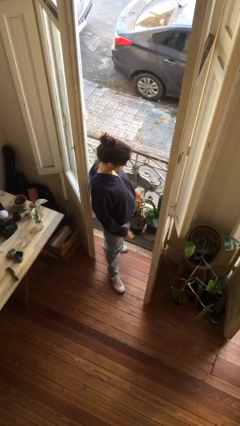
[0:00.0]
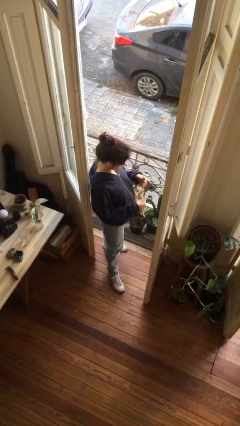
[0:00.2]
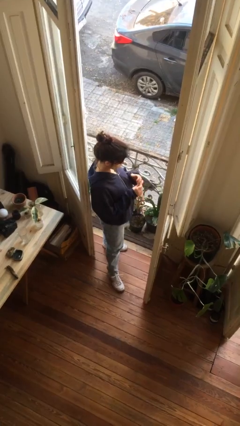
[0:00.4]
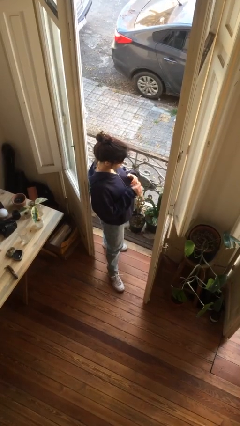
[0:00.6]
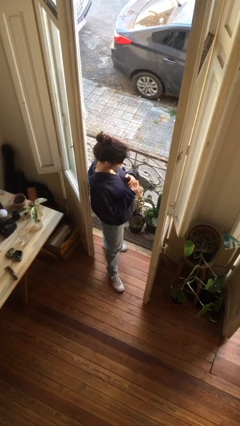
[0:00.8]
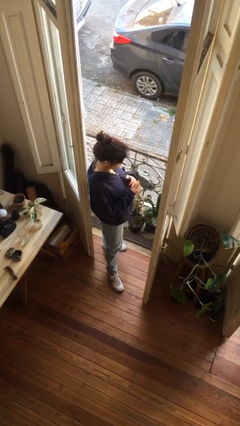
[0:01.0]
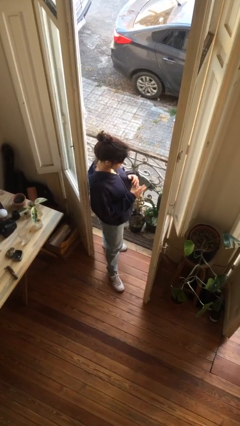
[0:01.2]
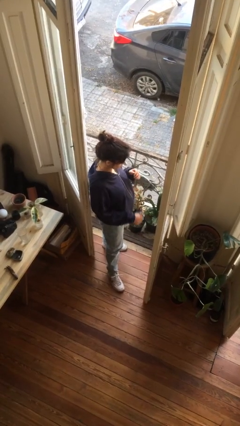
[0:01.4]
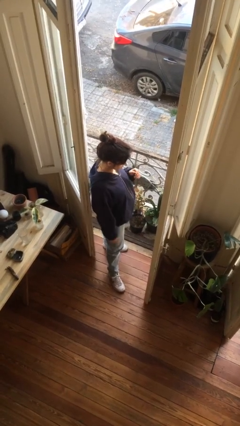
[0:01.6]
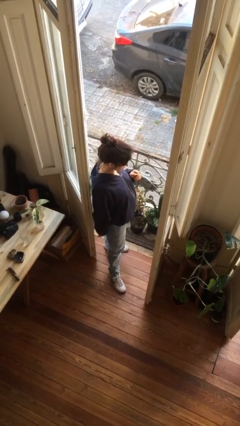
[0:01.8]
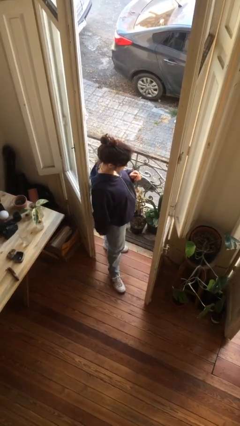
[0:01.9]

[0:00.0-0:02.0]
person puts on ring

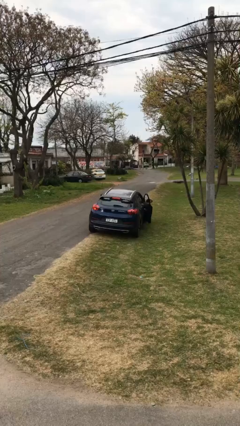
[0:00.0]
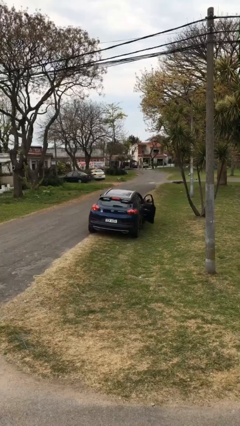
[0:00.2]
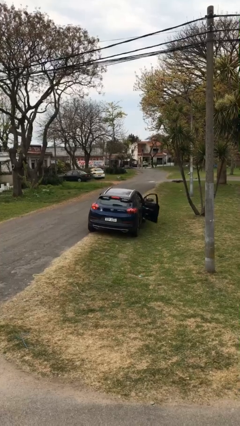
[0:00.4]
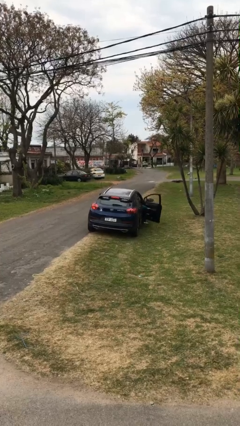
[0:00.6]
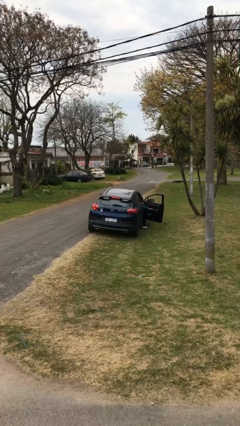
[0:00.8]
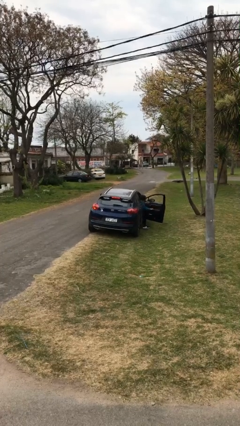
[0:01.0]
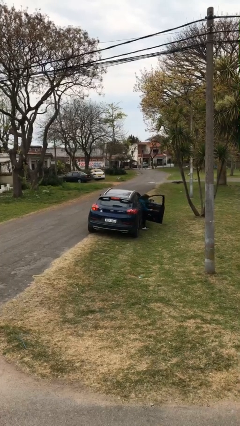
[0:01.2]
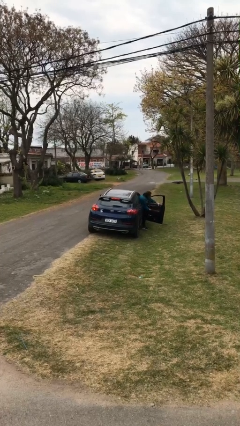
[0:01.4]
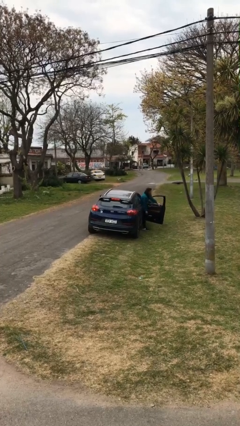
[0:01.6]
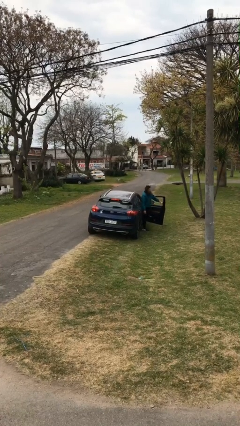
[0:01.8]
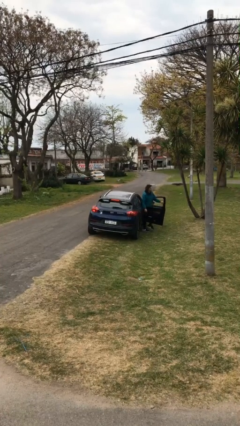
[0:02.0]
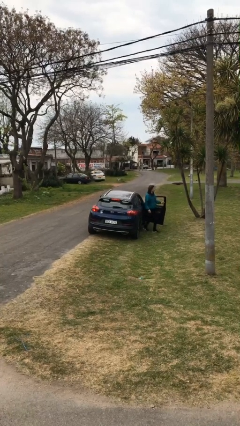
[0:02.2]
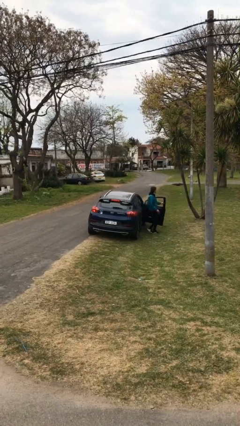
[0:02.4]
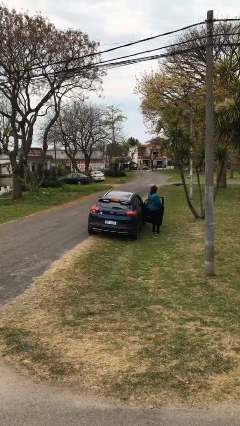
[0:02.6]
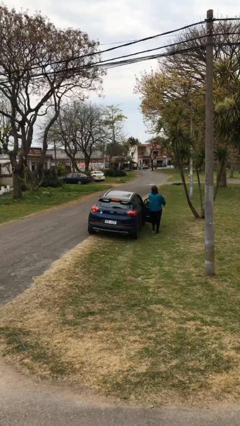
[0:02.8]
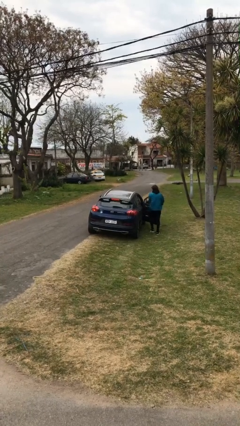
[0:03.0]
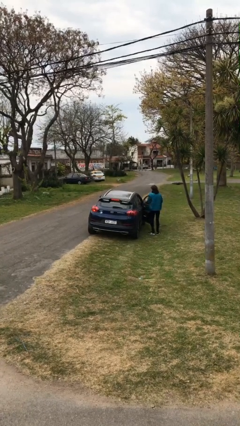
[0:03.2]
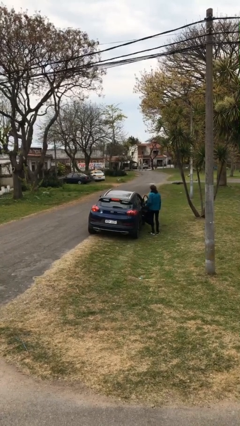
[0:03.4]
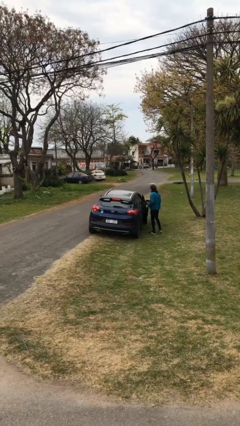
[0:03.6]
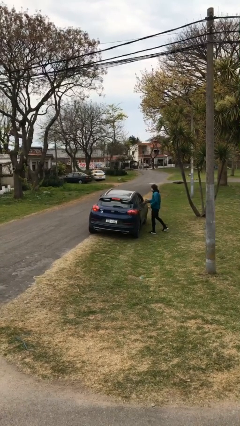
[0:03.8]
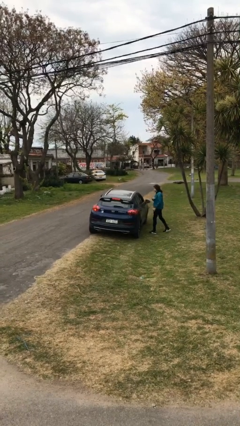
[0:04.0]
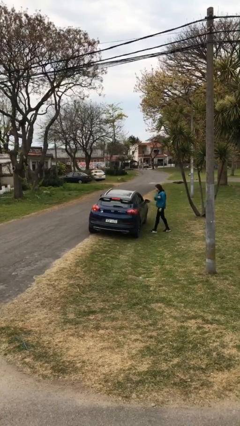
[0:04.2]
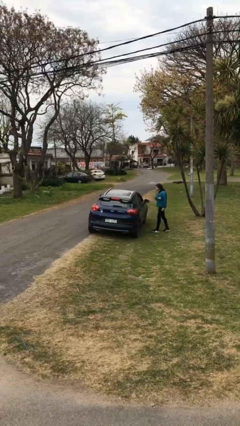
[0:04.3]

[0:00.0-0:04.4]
car drops off person

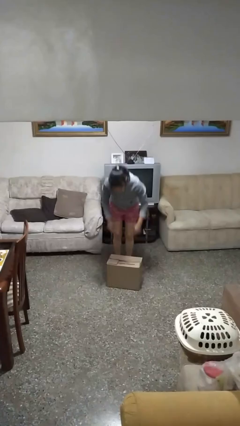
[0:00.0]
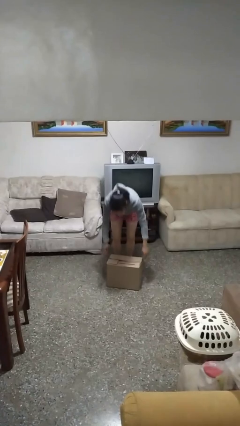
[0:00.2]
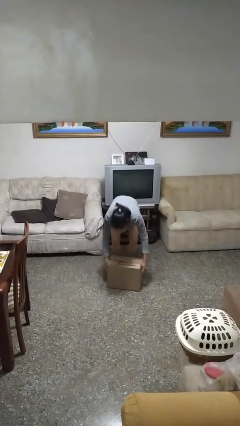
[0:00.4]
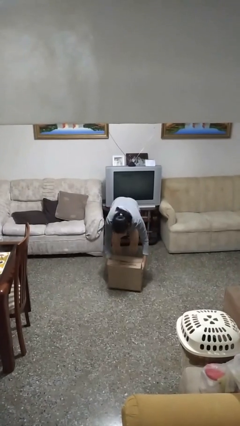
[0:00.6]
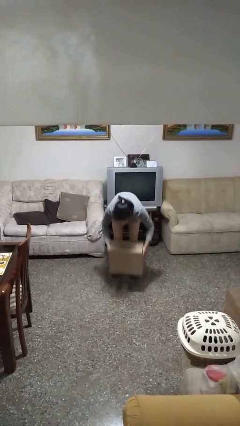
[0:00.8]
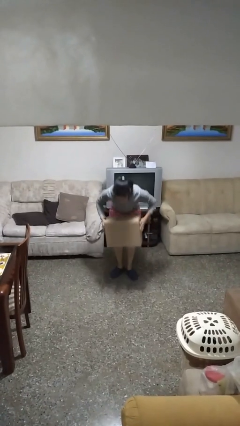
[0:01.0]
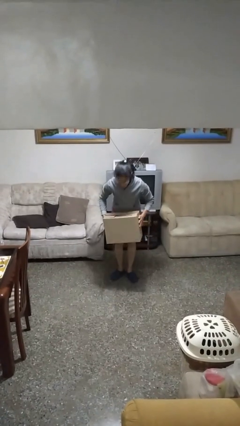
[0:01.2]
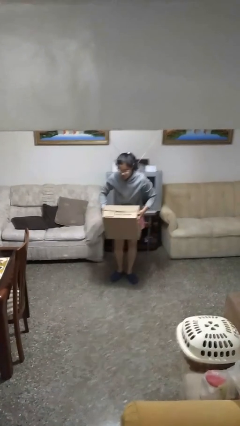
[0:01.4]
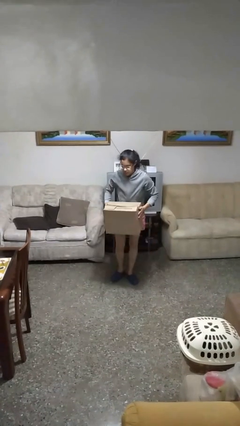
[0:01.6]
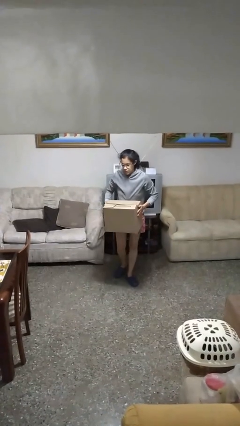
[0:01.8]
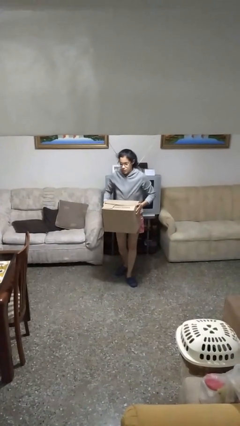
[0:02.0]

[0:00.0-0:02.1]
person picks up object from floor

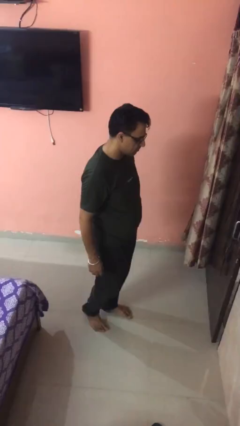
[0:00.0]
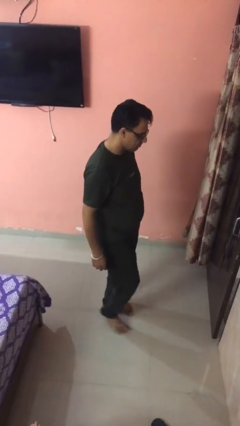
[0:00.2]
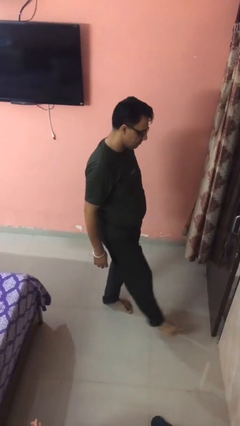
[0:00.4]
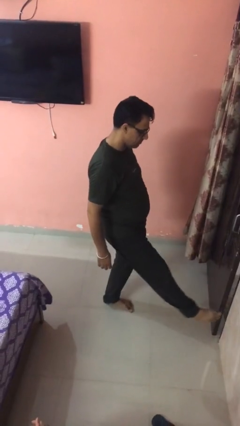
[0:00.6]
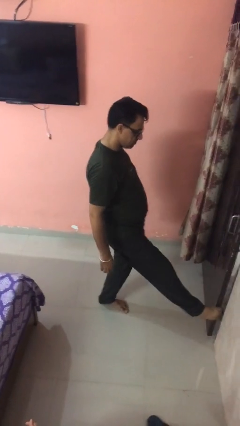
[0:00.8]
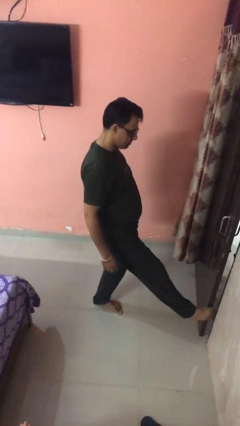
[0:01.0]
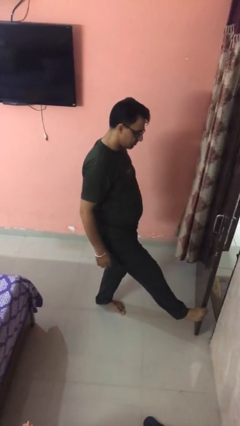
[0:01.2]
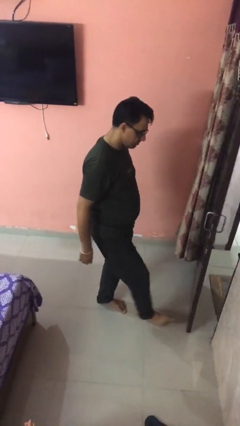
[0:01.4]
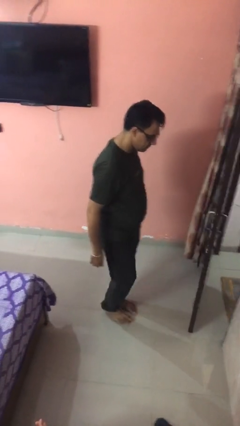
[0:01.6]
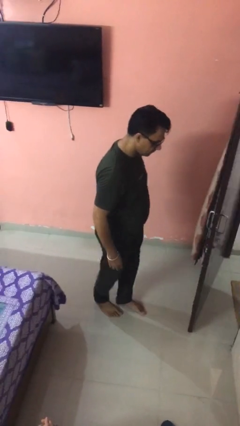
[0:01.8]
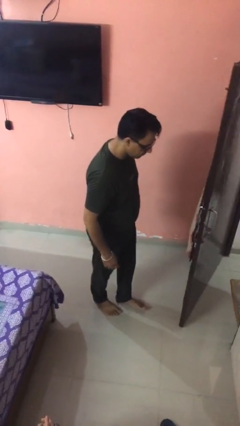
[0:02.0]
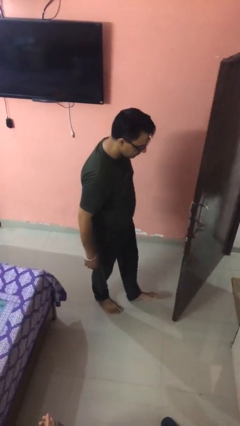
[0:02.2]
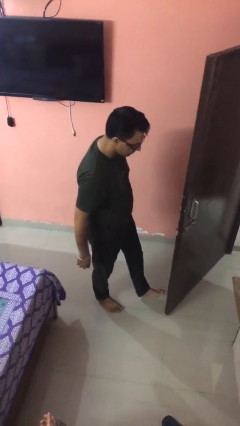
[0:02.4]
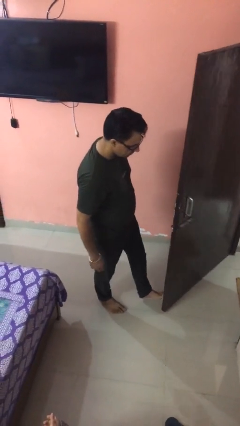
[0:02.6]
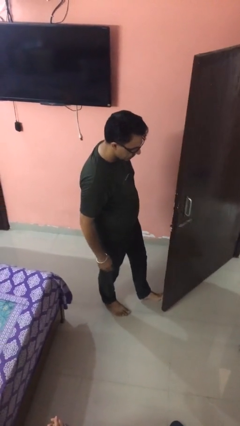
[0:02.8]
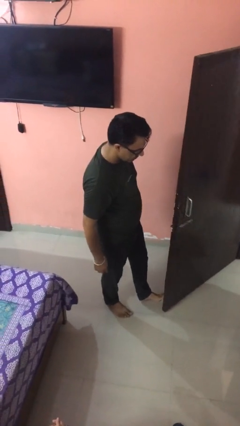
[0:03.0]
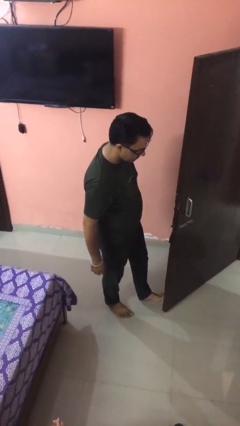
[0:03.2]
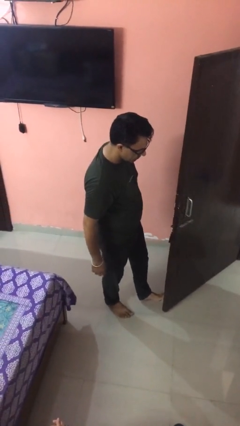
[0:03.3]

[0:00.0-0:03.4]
person opens facility door

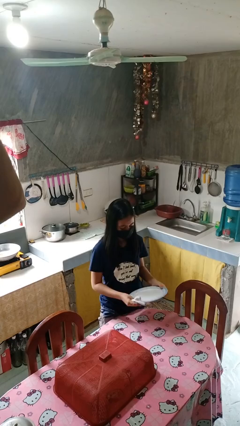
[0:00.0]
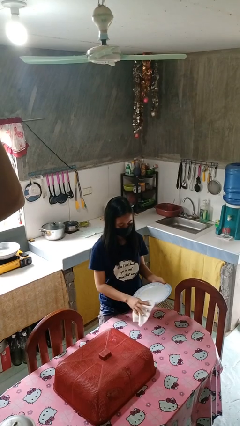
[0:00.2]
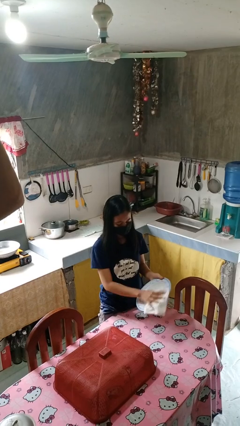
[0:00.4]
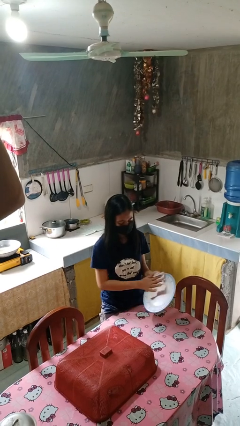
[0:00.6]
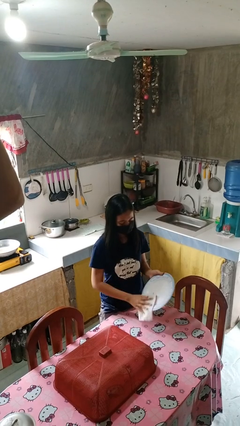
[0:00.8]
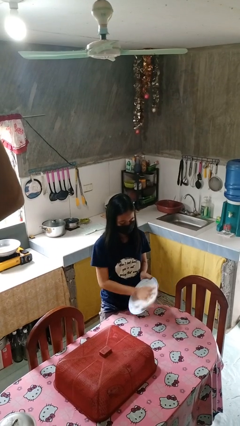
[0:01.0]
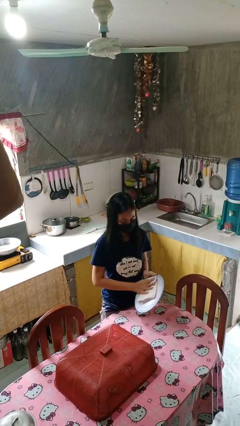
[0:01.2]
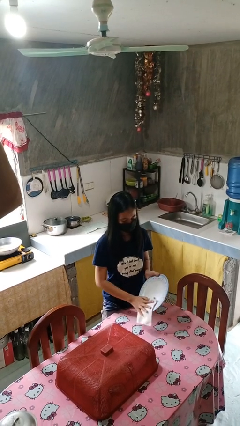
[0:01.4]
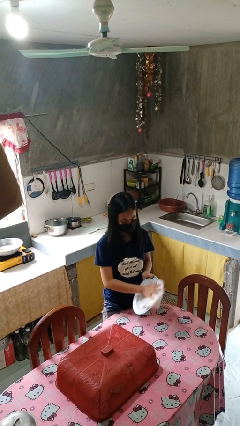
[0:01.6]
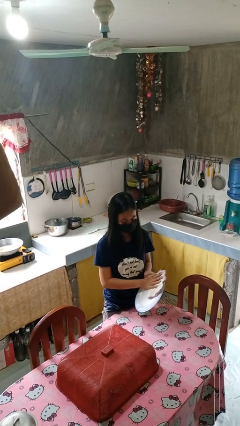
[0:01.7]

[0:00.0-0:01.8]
person dries dish

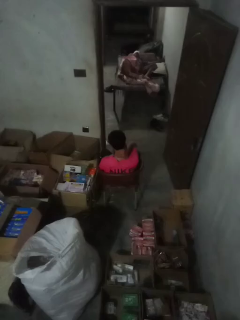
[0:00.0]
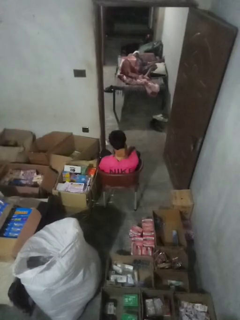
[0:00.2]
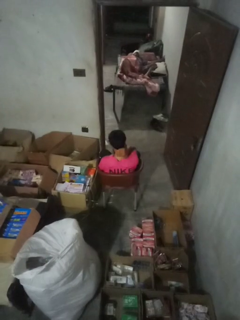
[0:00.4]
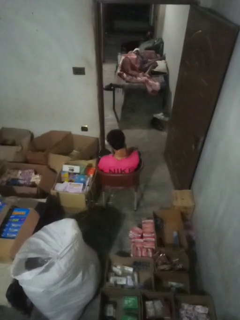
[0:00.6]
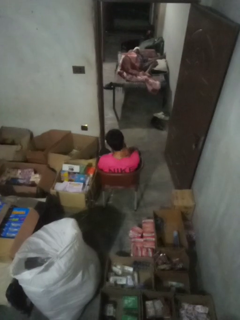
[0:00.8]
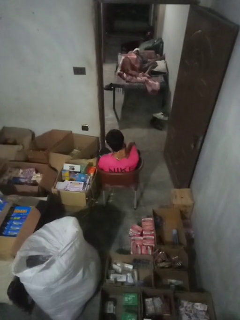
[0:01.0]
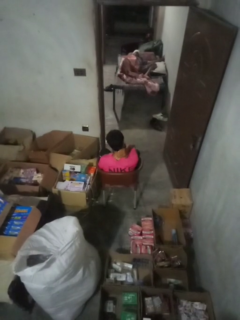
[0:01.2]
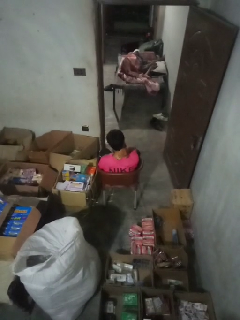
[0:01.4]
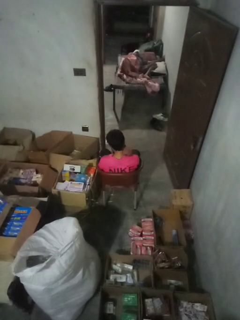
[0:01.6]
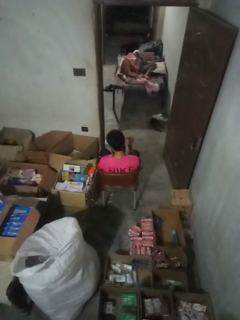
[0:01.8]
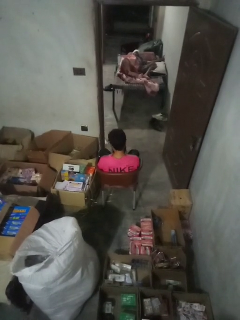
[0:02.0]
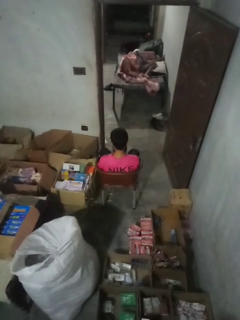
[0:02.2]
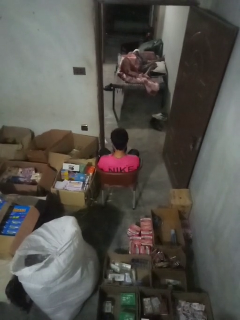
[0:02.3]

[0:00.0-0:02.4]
person rubs neck

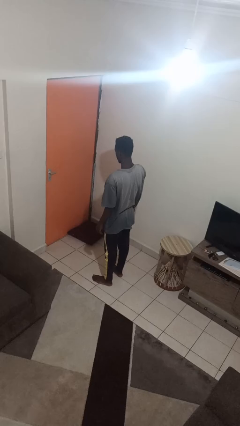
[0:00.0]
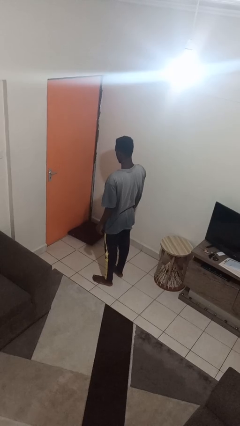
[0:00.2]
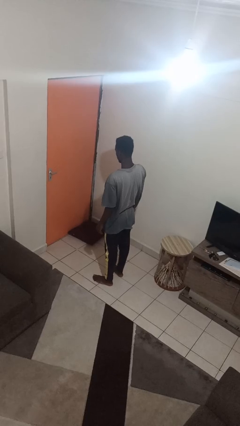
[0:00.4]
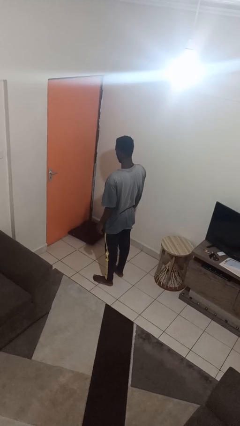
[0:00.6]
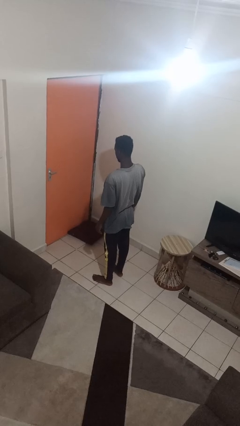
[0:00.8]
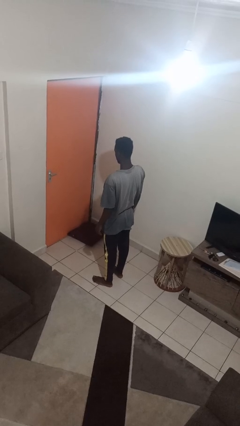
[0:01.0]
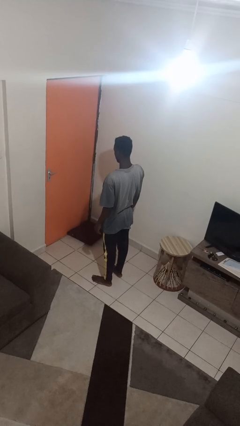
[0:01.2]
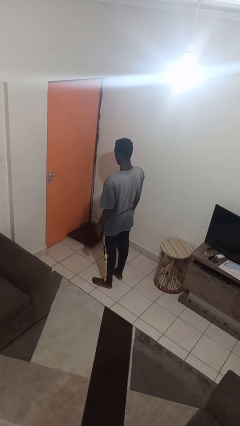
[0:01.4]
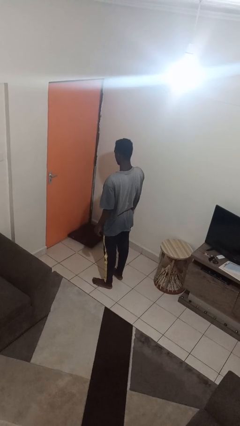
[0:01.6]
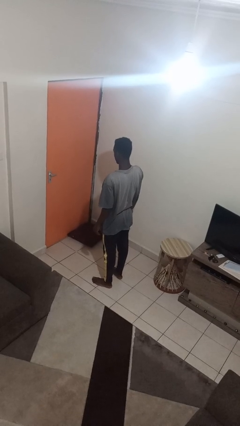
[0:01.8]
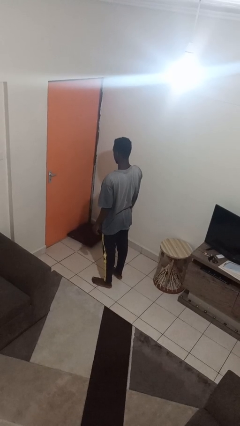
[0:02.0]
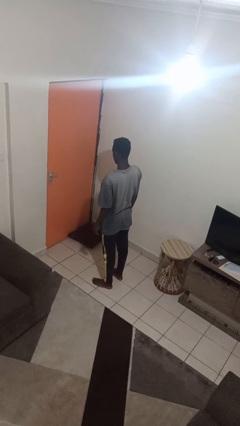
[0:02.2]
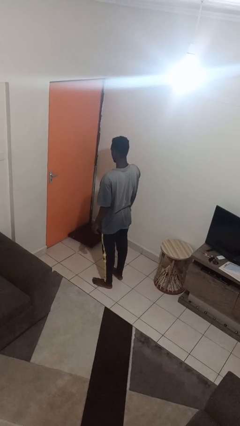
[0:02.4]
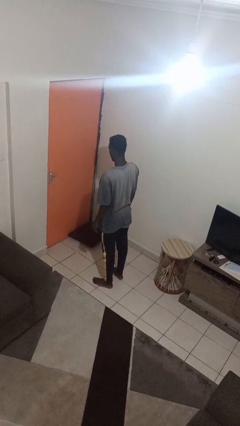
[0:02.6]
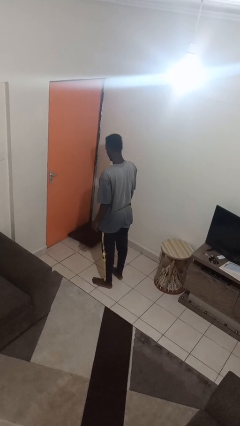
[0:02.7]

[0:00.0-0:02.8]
person drops object
